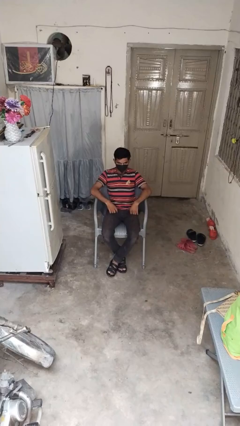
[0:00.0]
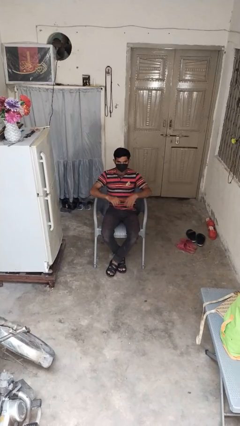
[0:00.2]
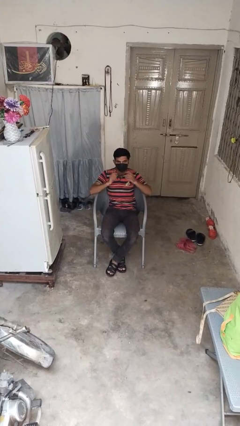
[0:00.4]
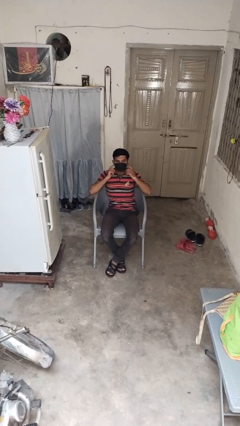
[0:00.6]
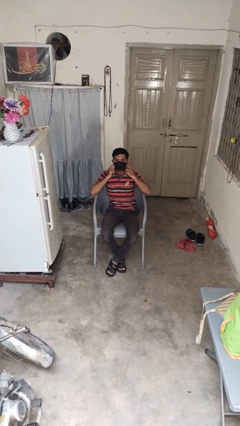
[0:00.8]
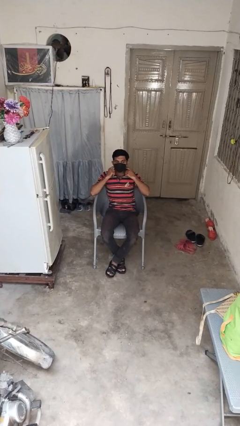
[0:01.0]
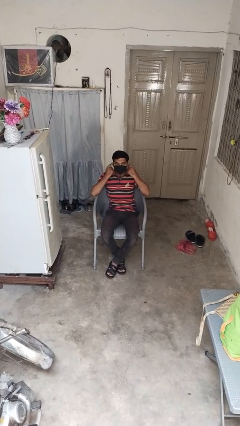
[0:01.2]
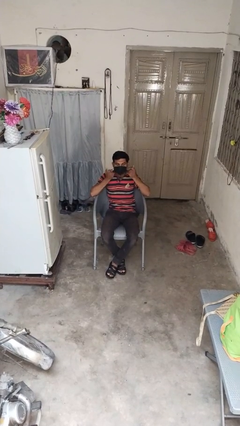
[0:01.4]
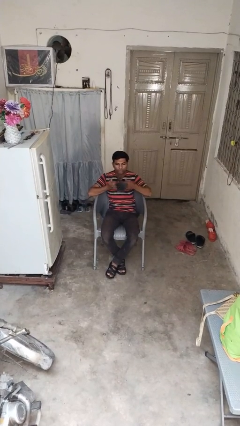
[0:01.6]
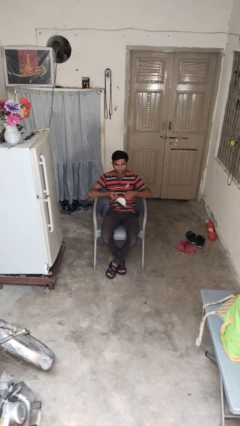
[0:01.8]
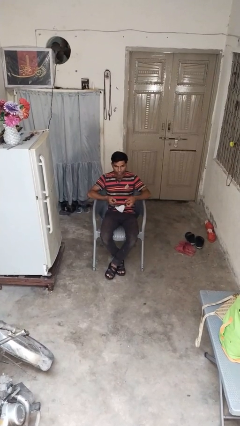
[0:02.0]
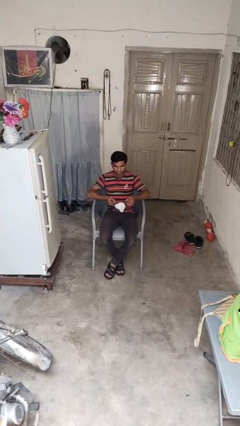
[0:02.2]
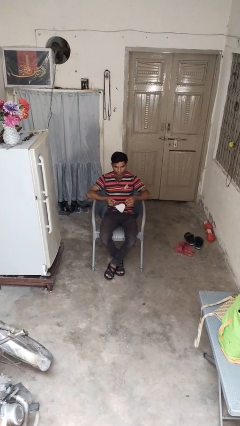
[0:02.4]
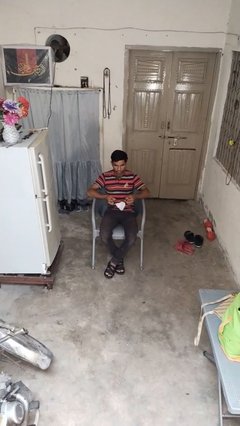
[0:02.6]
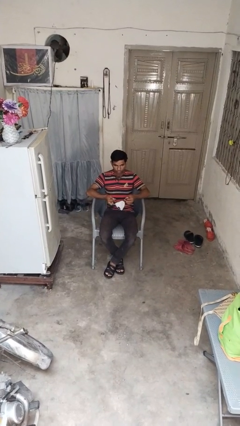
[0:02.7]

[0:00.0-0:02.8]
person takes off facemask

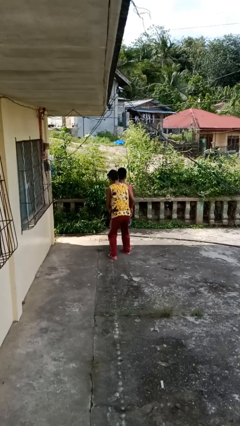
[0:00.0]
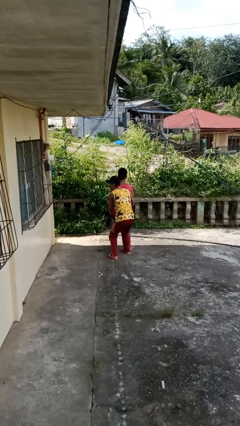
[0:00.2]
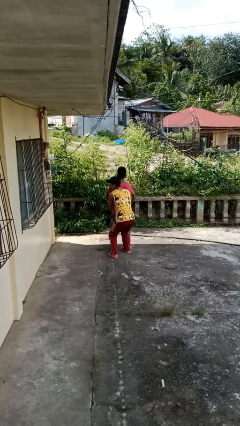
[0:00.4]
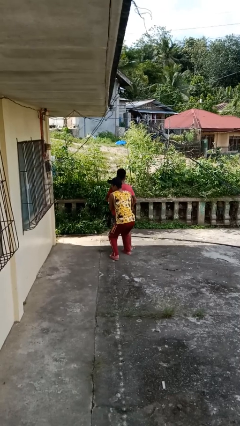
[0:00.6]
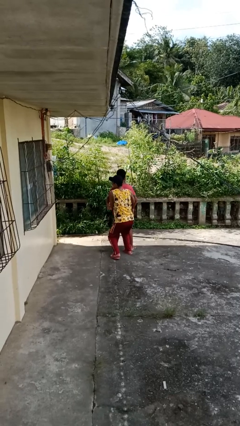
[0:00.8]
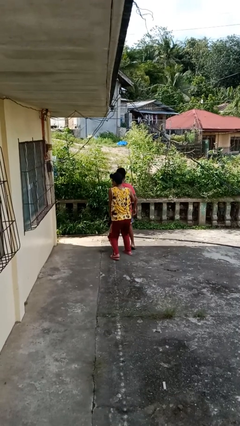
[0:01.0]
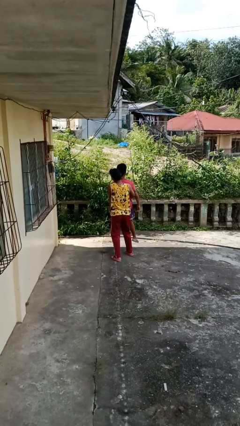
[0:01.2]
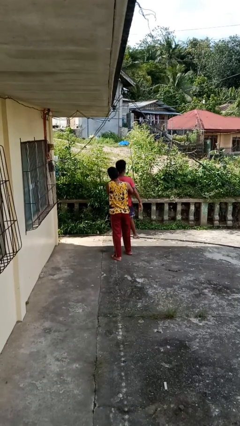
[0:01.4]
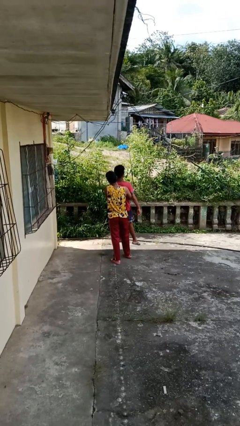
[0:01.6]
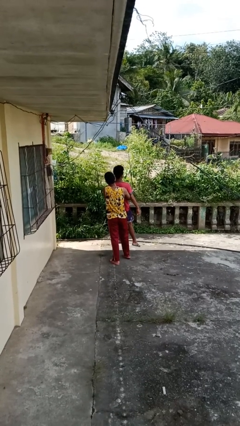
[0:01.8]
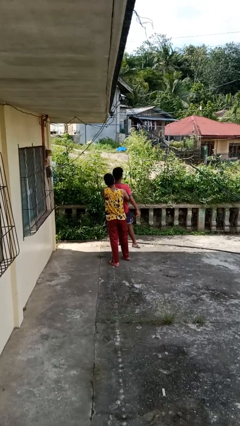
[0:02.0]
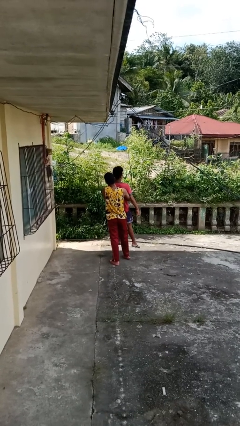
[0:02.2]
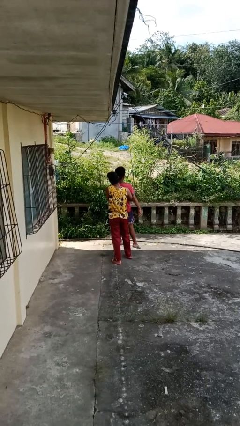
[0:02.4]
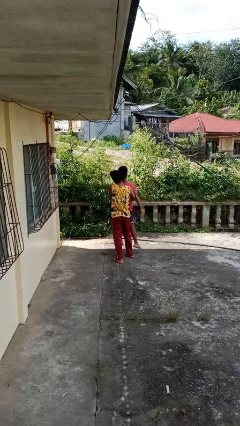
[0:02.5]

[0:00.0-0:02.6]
person picks up person

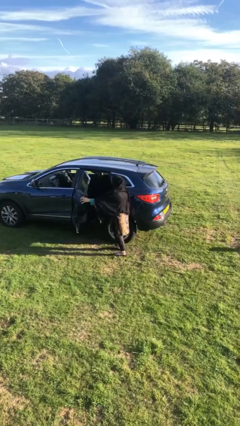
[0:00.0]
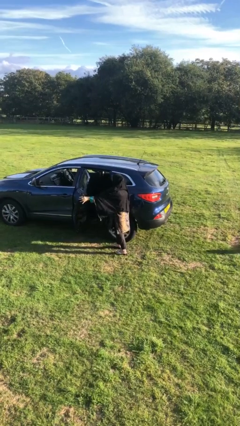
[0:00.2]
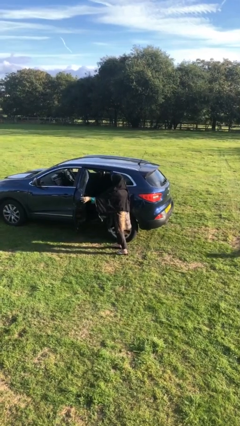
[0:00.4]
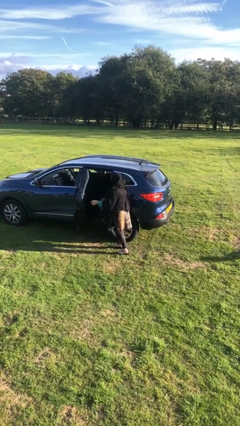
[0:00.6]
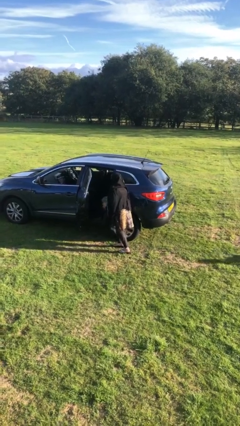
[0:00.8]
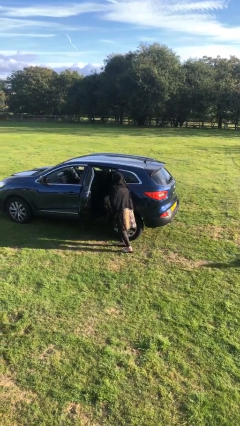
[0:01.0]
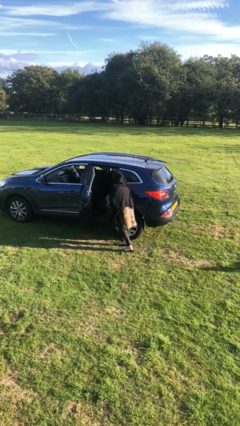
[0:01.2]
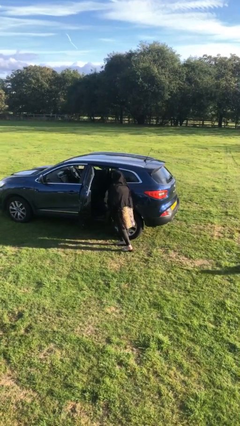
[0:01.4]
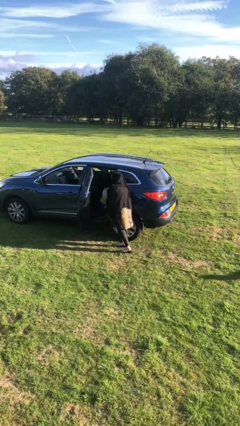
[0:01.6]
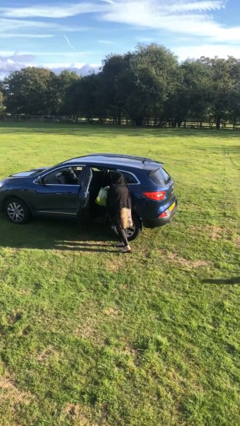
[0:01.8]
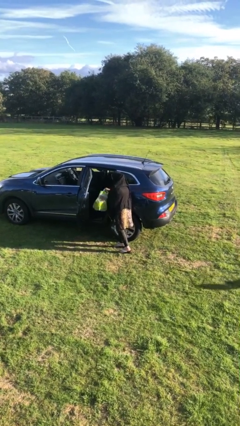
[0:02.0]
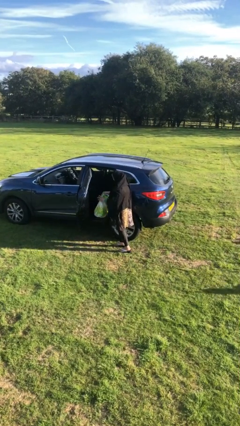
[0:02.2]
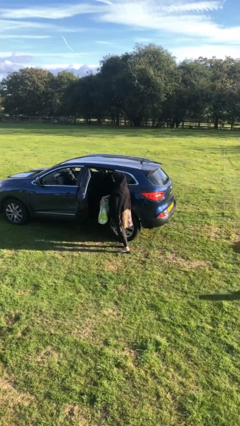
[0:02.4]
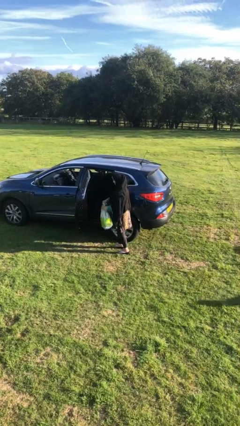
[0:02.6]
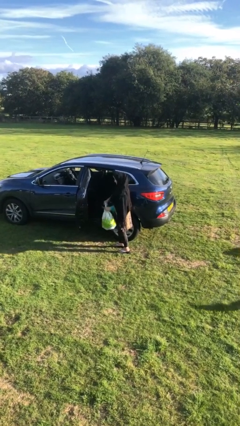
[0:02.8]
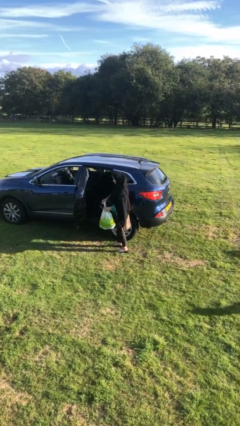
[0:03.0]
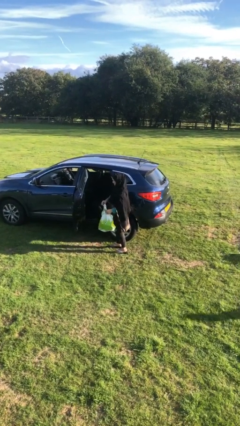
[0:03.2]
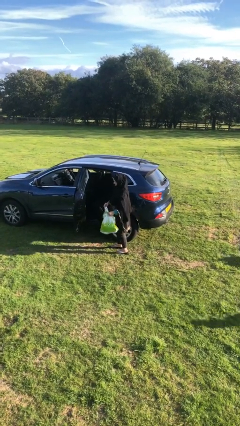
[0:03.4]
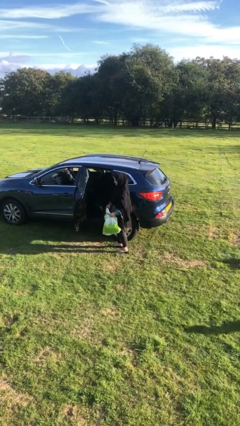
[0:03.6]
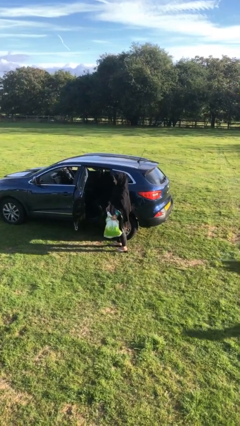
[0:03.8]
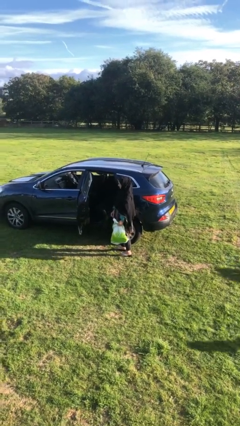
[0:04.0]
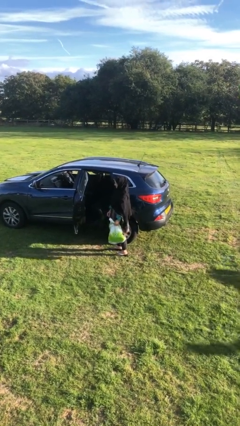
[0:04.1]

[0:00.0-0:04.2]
person unloads car

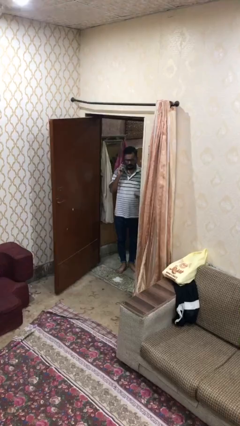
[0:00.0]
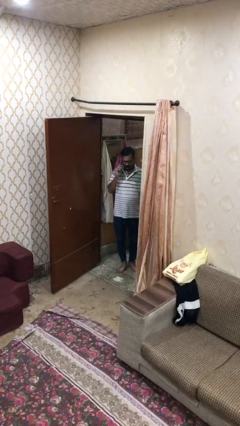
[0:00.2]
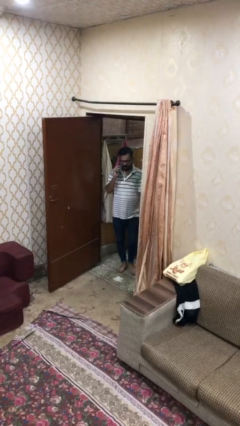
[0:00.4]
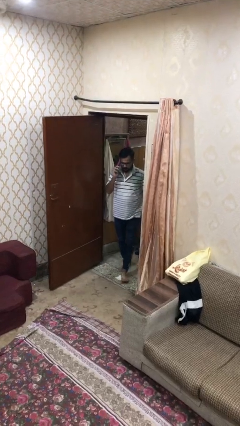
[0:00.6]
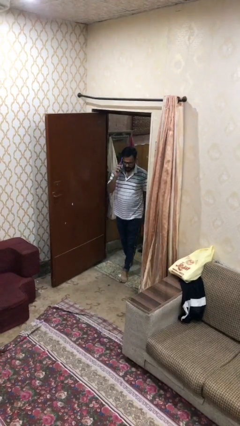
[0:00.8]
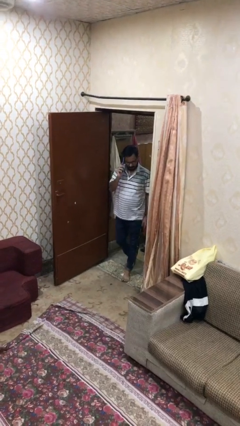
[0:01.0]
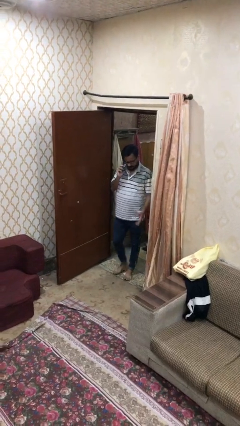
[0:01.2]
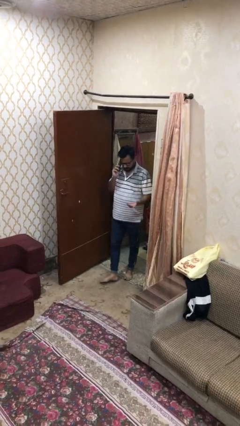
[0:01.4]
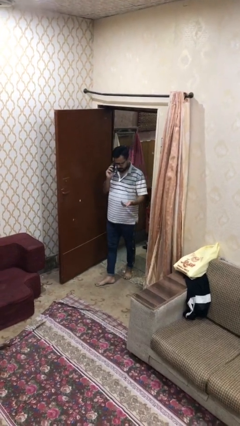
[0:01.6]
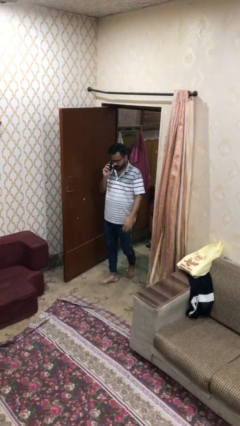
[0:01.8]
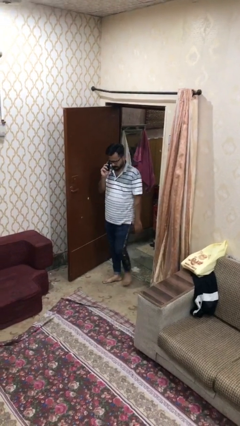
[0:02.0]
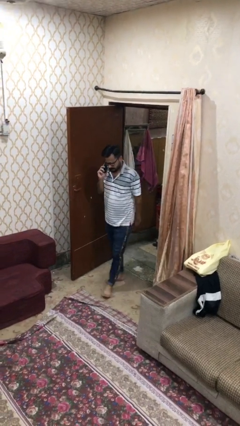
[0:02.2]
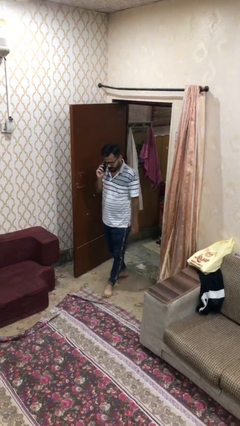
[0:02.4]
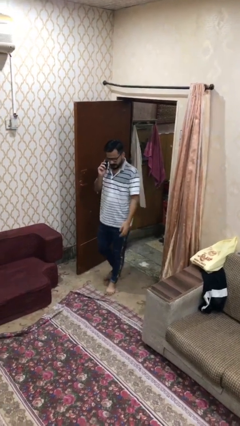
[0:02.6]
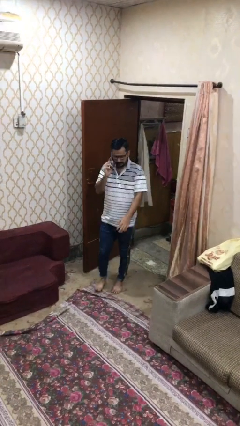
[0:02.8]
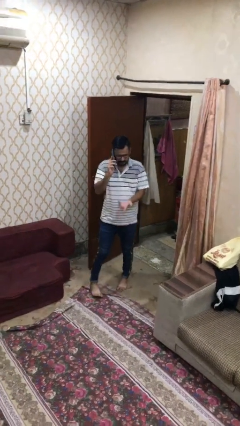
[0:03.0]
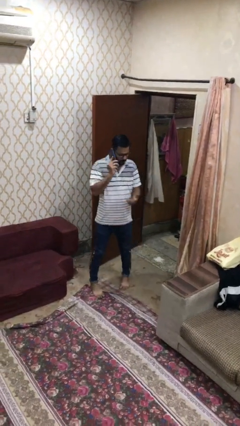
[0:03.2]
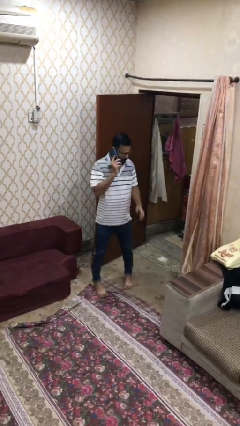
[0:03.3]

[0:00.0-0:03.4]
person enters scene through structure

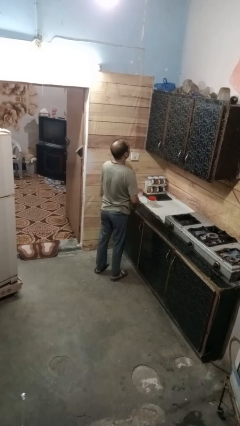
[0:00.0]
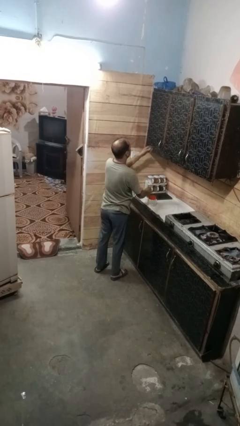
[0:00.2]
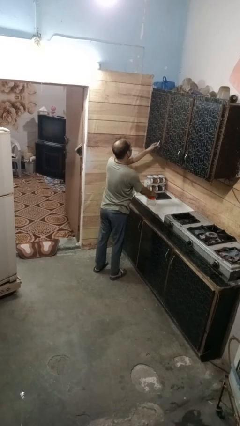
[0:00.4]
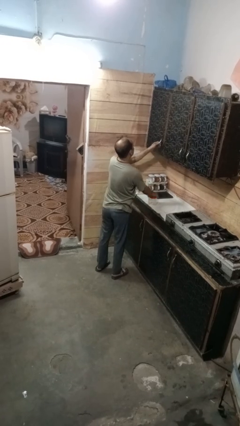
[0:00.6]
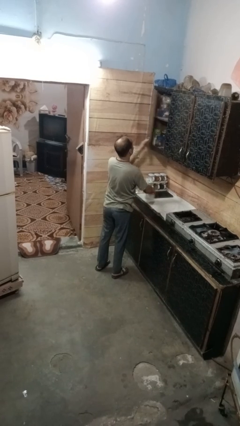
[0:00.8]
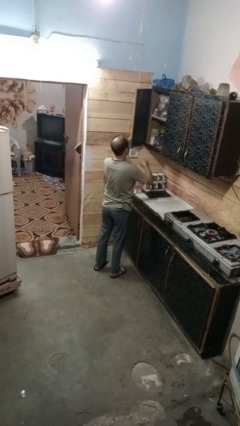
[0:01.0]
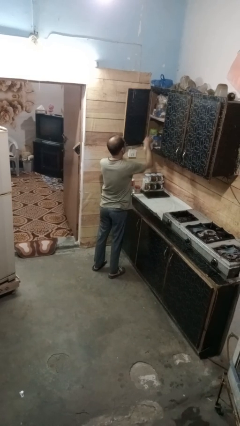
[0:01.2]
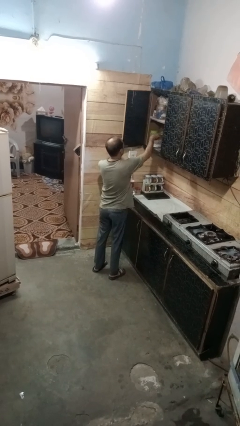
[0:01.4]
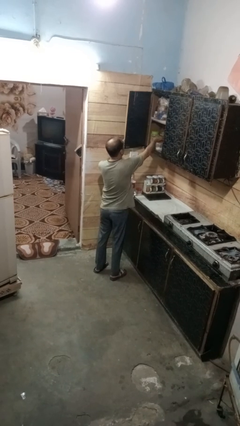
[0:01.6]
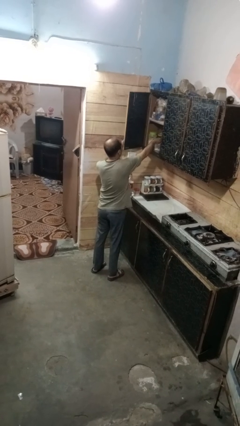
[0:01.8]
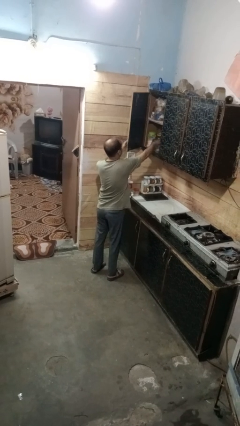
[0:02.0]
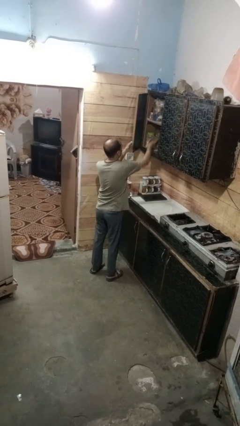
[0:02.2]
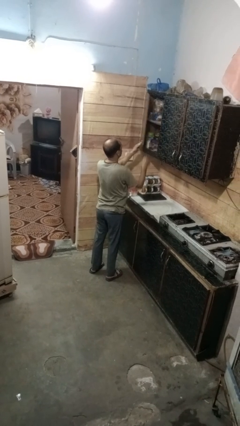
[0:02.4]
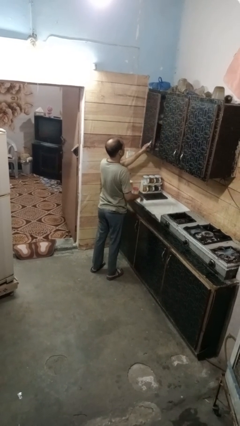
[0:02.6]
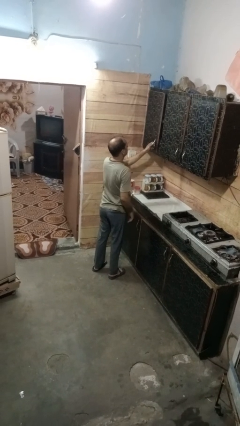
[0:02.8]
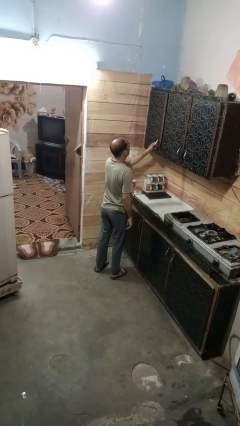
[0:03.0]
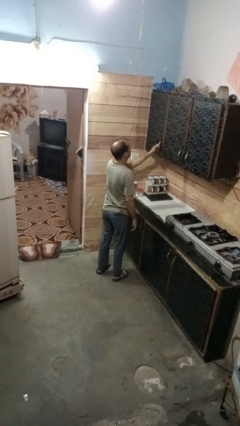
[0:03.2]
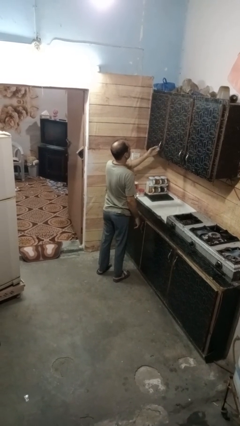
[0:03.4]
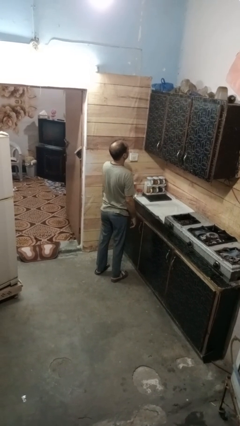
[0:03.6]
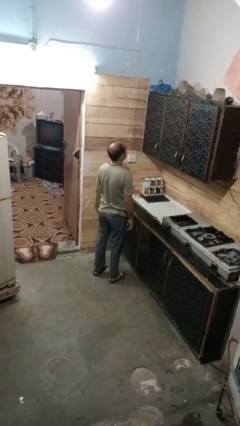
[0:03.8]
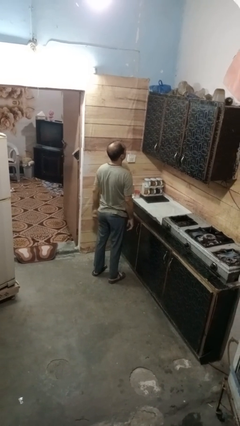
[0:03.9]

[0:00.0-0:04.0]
person puts object in cabinet

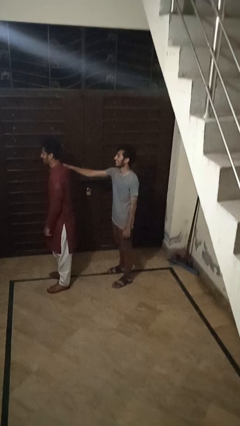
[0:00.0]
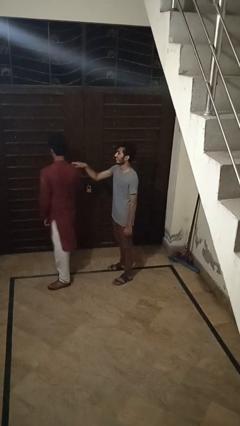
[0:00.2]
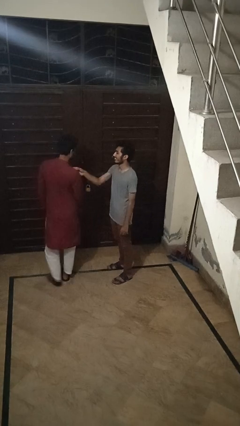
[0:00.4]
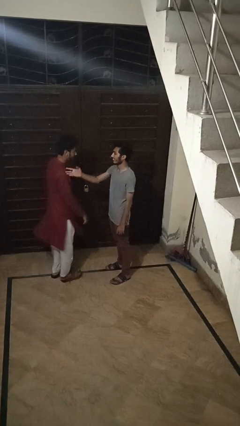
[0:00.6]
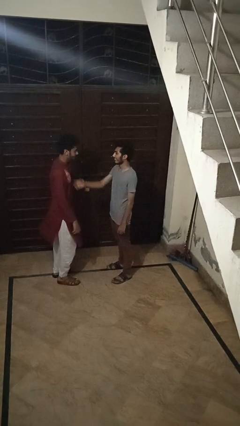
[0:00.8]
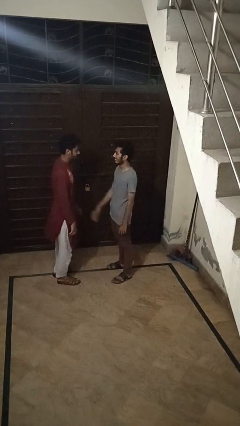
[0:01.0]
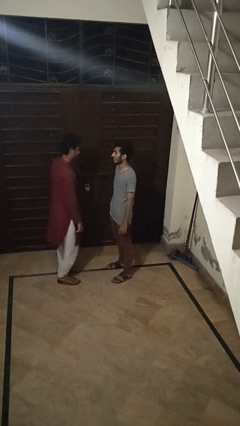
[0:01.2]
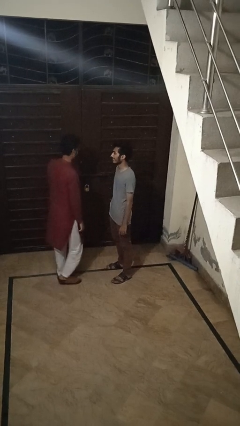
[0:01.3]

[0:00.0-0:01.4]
person spins person around
